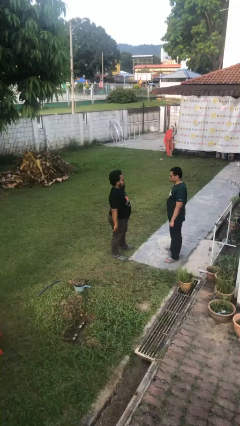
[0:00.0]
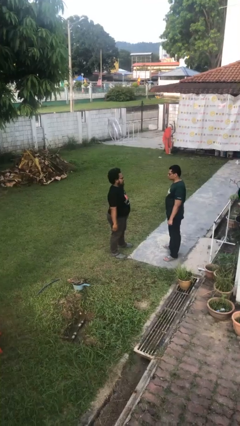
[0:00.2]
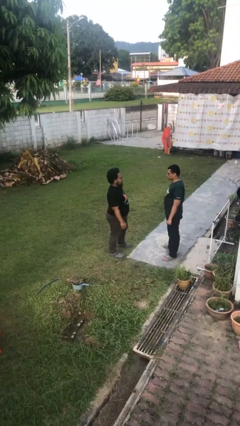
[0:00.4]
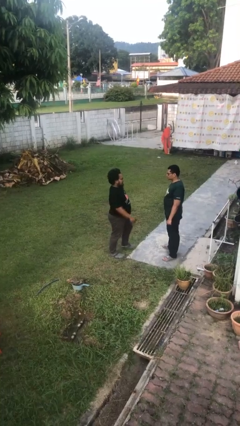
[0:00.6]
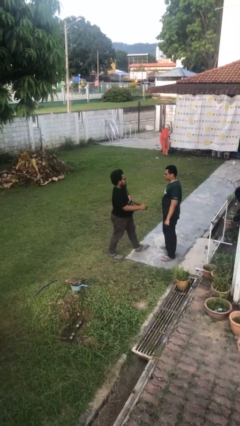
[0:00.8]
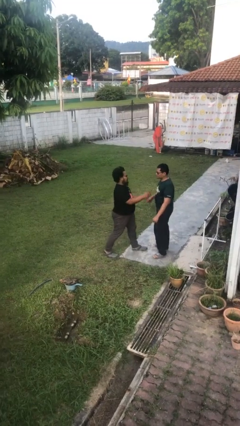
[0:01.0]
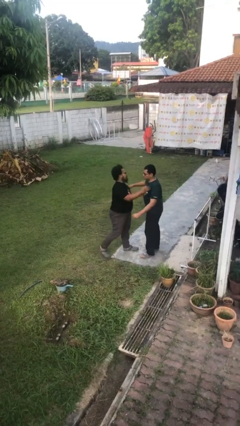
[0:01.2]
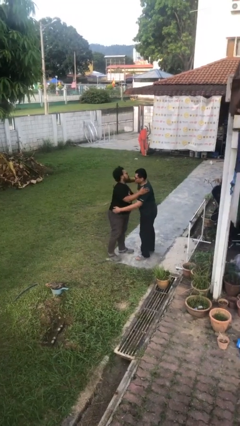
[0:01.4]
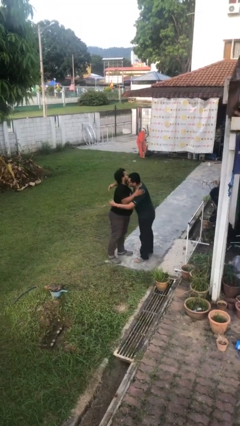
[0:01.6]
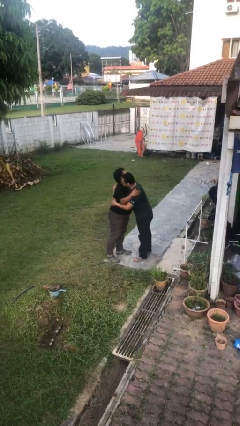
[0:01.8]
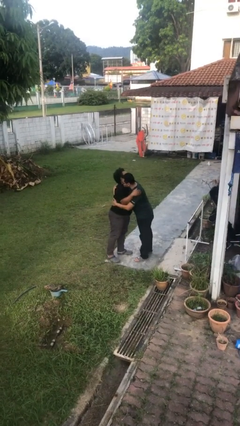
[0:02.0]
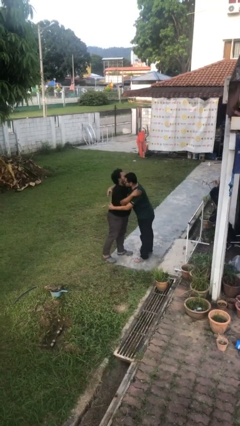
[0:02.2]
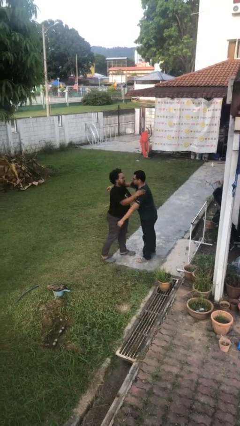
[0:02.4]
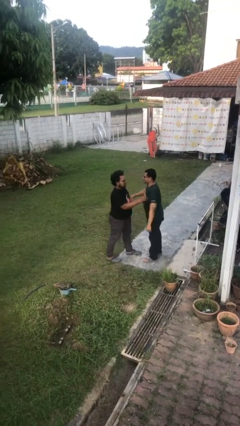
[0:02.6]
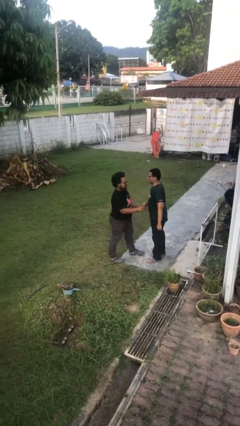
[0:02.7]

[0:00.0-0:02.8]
person embraces person

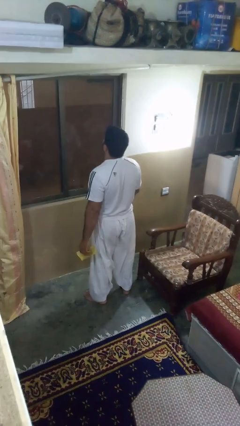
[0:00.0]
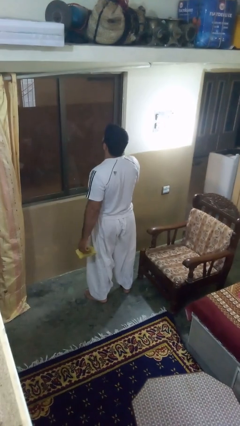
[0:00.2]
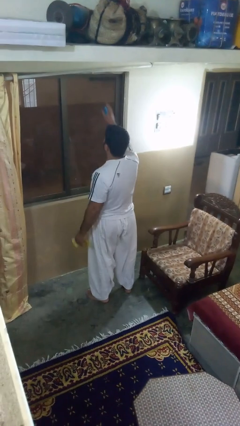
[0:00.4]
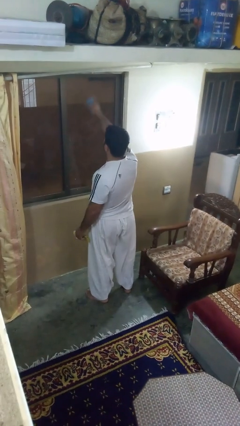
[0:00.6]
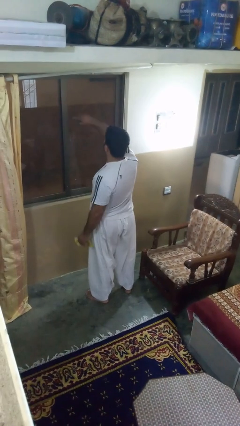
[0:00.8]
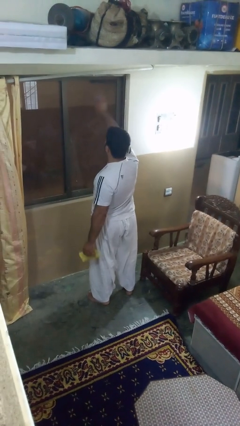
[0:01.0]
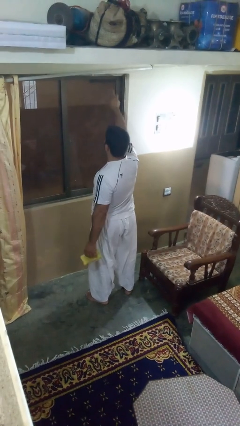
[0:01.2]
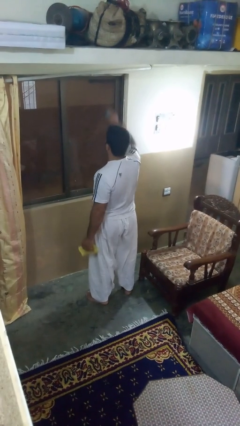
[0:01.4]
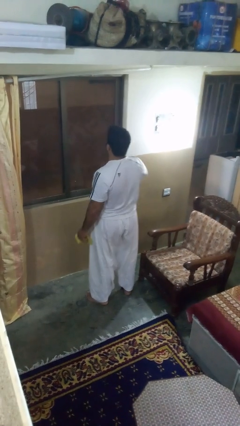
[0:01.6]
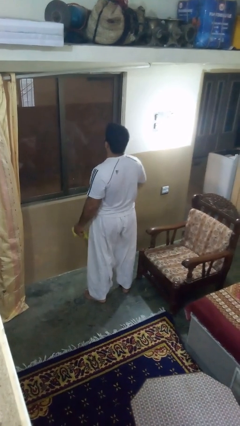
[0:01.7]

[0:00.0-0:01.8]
person sprays from bottle

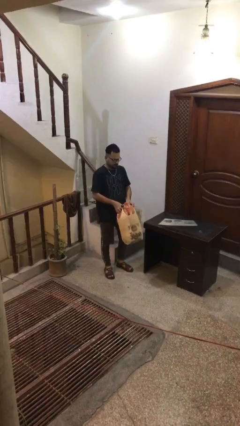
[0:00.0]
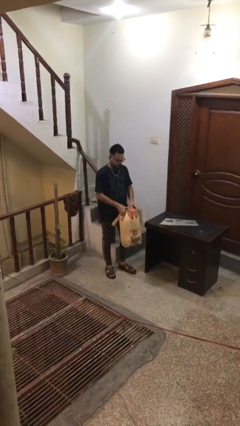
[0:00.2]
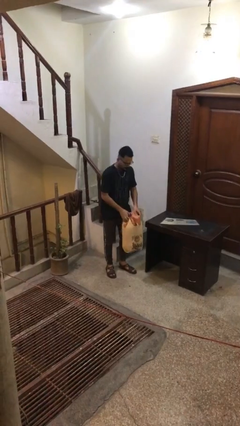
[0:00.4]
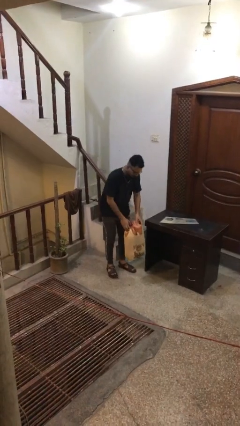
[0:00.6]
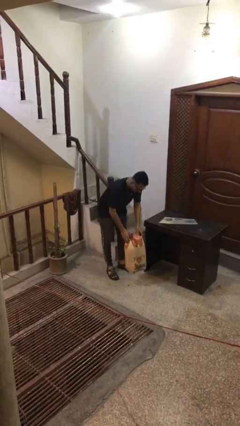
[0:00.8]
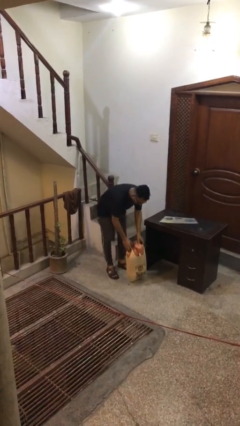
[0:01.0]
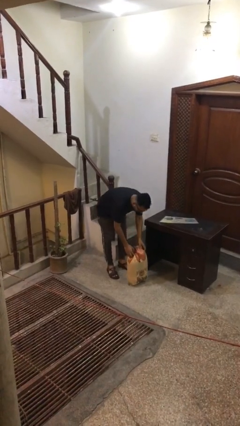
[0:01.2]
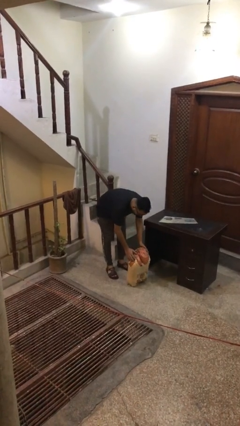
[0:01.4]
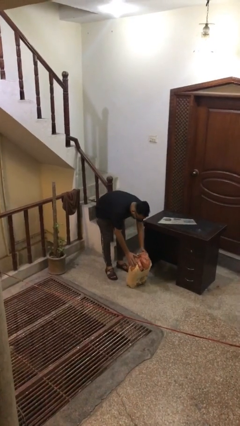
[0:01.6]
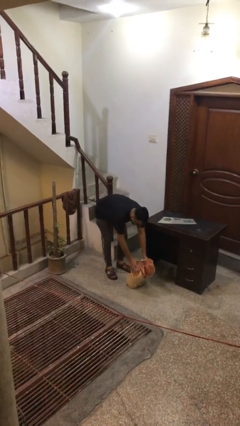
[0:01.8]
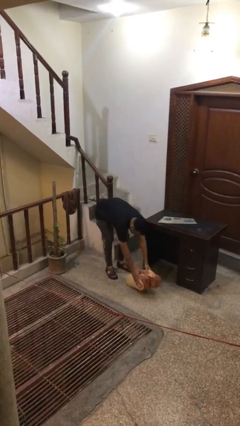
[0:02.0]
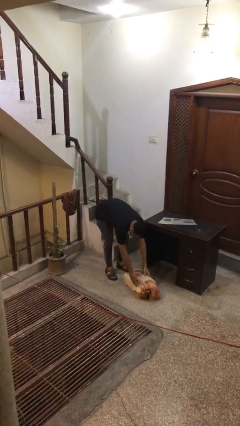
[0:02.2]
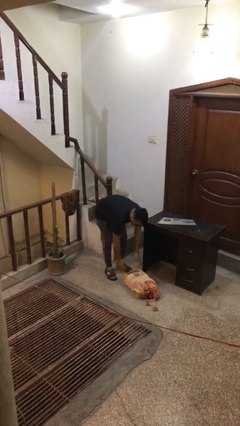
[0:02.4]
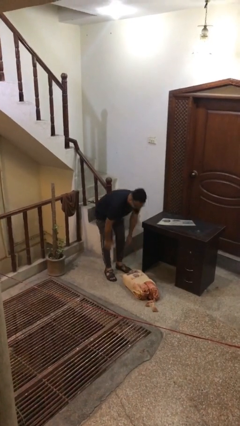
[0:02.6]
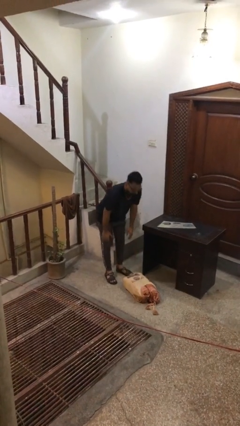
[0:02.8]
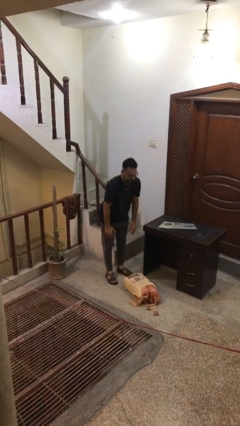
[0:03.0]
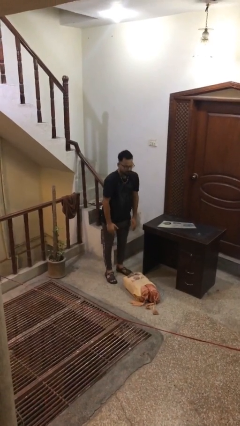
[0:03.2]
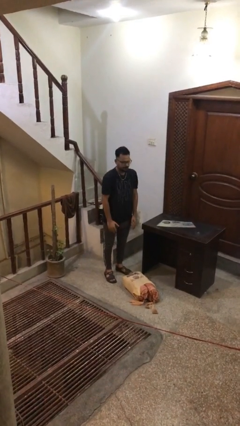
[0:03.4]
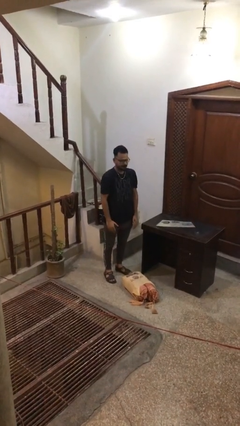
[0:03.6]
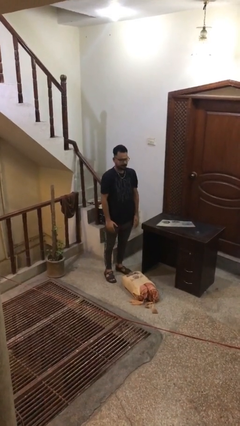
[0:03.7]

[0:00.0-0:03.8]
person puts down object on floor

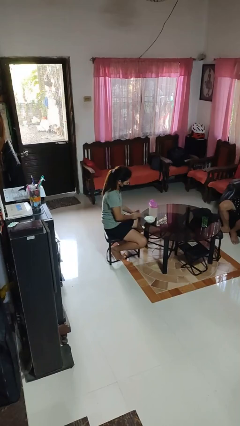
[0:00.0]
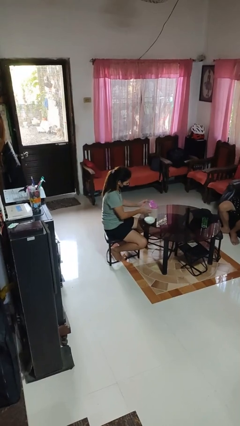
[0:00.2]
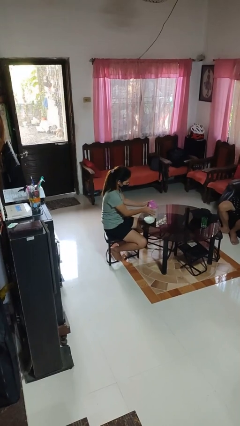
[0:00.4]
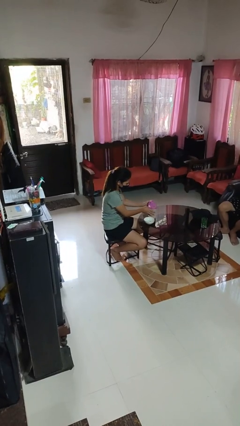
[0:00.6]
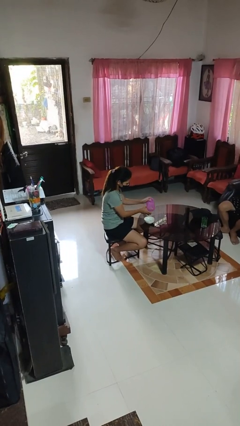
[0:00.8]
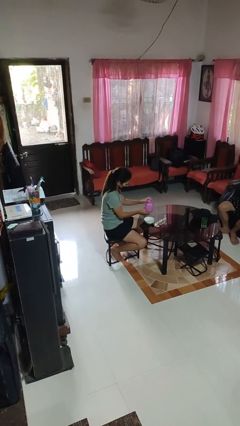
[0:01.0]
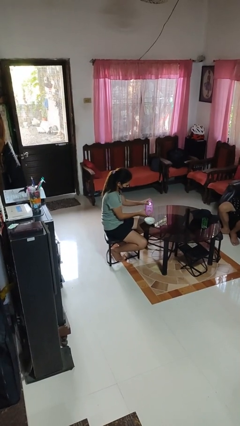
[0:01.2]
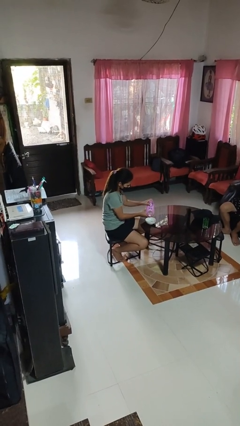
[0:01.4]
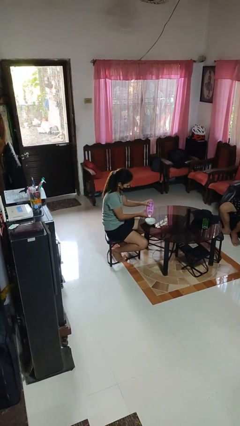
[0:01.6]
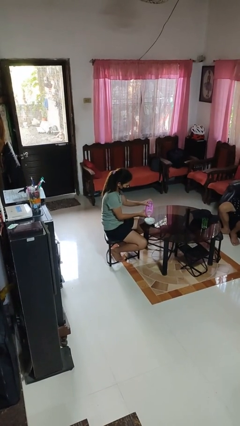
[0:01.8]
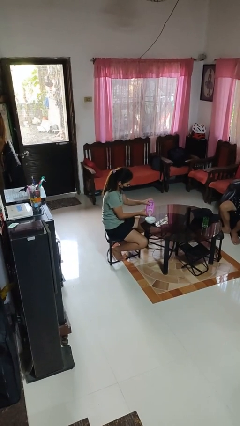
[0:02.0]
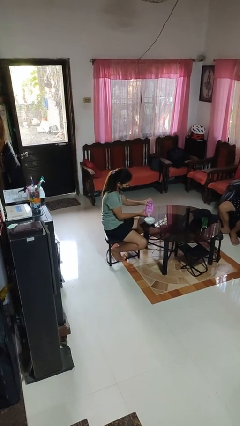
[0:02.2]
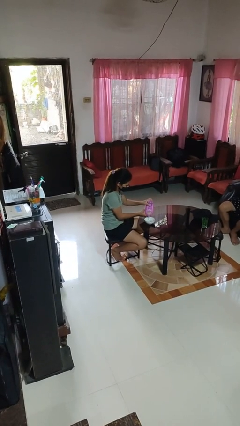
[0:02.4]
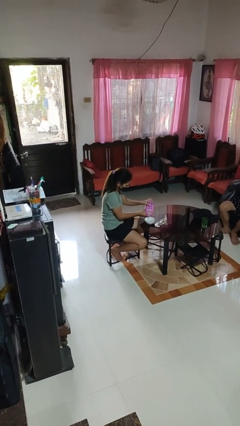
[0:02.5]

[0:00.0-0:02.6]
person pours into bowl

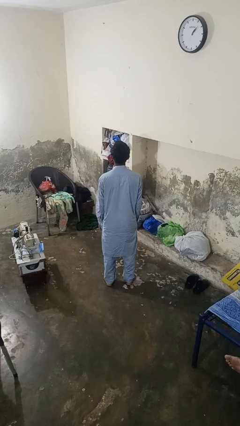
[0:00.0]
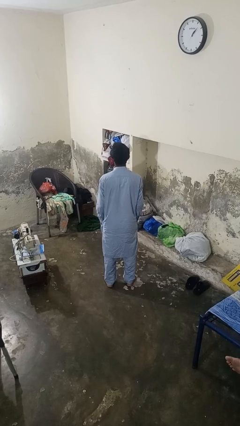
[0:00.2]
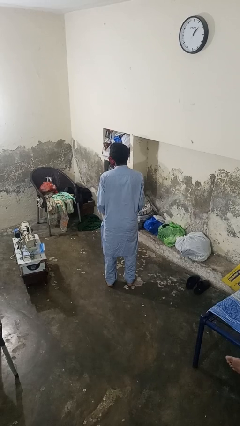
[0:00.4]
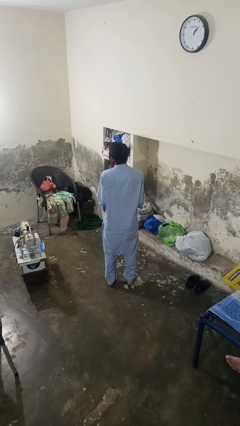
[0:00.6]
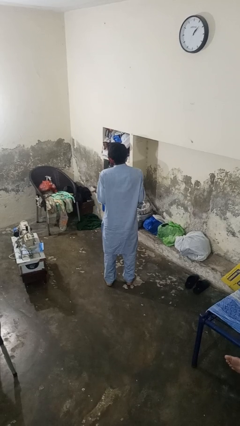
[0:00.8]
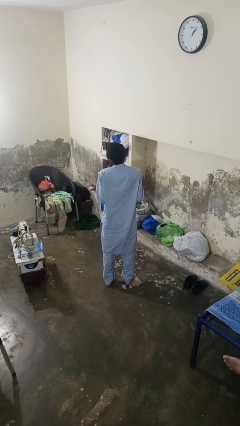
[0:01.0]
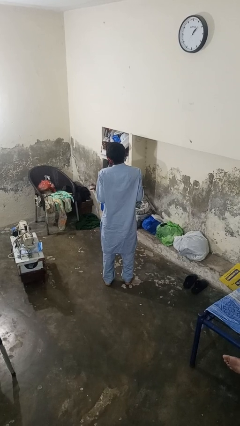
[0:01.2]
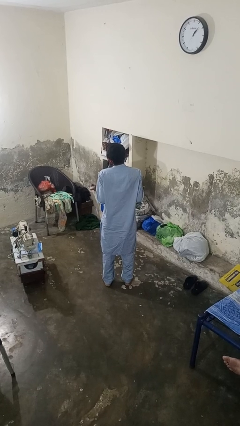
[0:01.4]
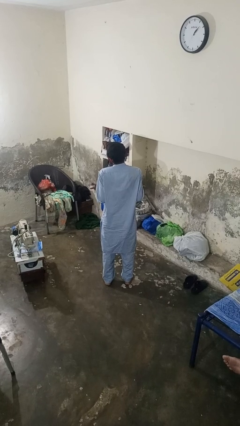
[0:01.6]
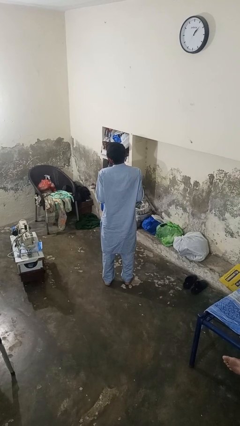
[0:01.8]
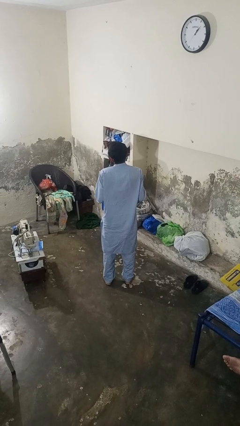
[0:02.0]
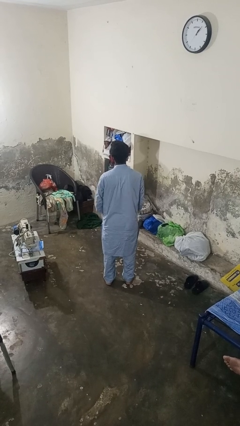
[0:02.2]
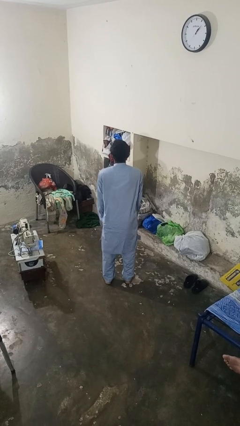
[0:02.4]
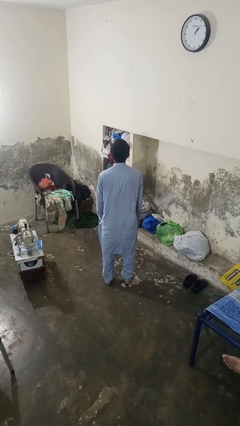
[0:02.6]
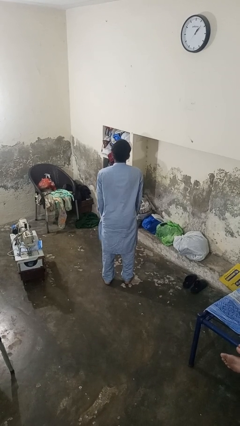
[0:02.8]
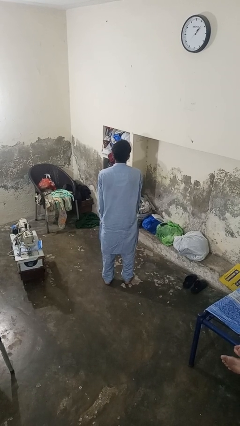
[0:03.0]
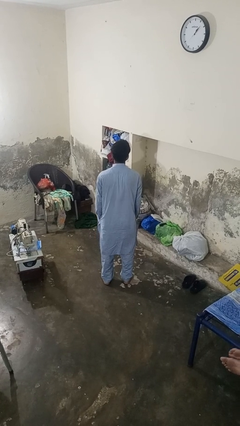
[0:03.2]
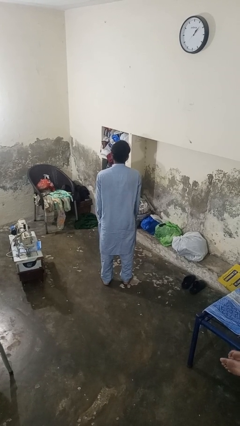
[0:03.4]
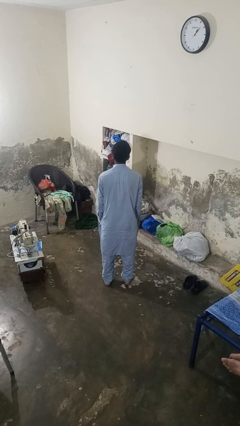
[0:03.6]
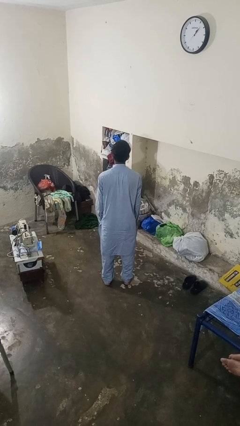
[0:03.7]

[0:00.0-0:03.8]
person shrugs

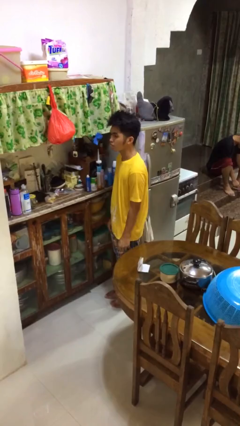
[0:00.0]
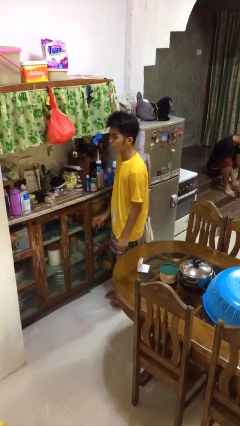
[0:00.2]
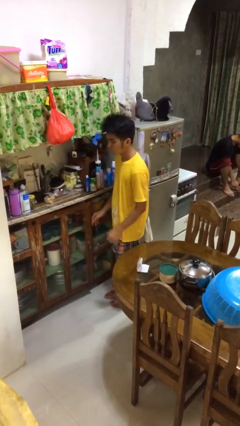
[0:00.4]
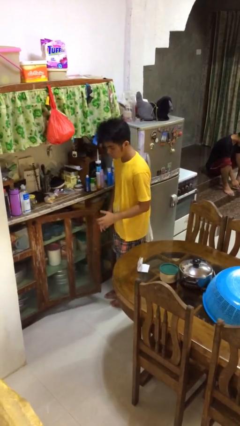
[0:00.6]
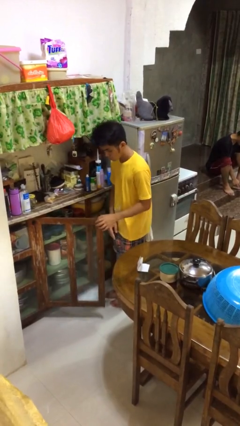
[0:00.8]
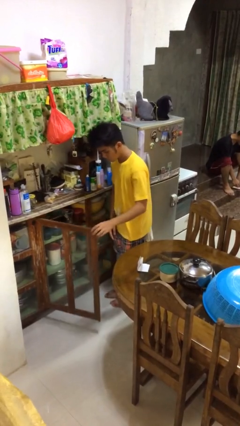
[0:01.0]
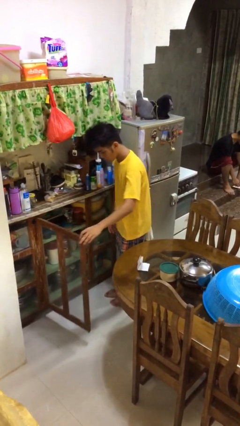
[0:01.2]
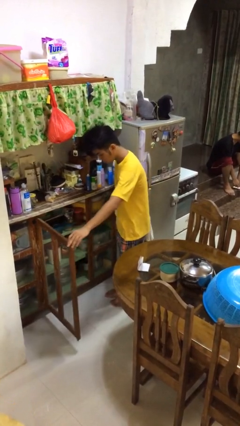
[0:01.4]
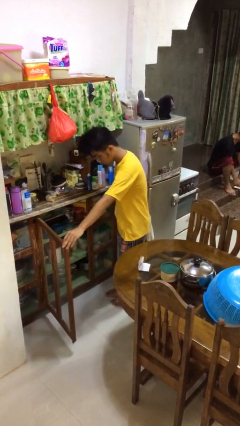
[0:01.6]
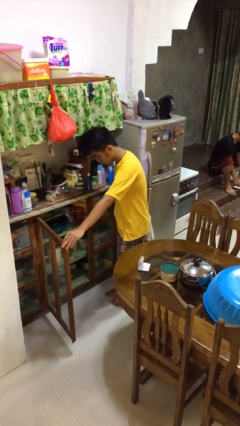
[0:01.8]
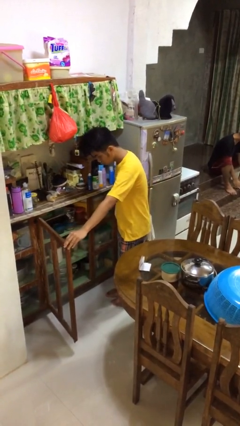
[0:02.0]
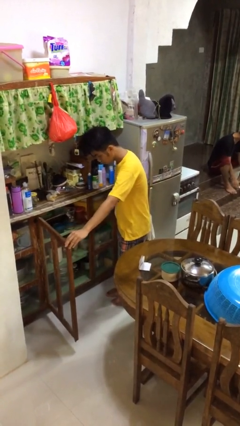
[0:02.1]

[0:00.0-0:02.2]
person opens cabinet

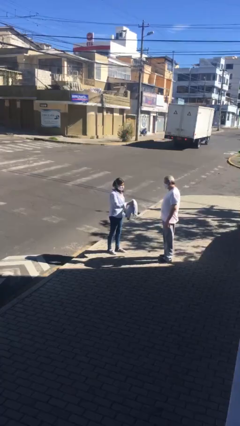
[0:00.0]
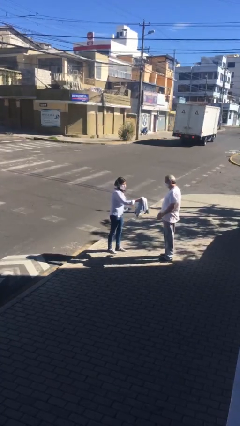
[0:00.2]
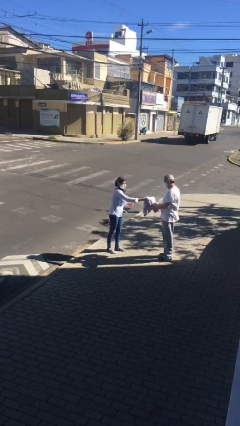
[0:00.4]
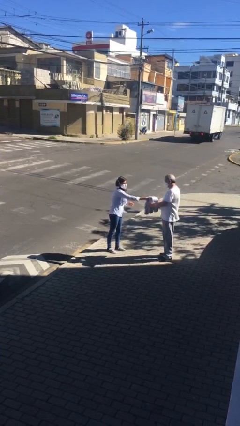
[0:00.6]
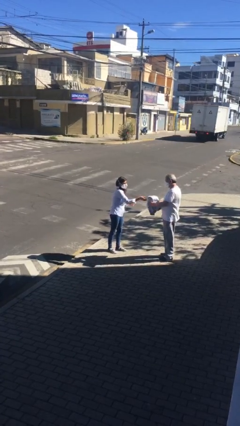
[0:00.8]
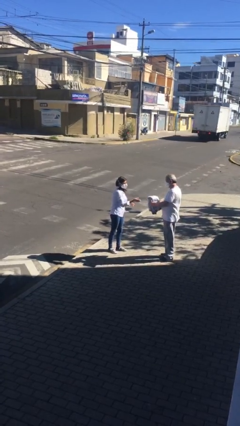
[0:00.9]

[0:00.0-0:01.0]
person transfers object to person
